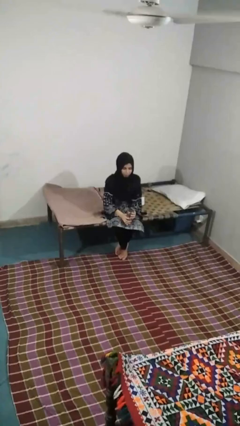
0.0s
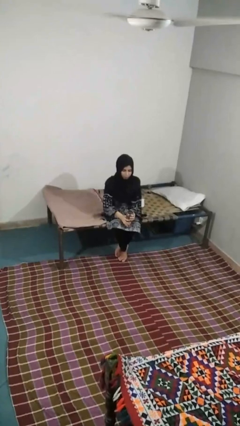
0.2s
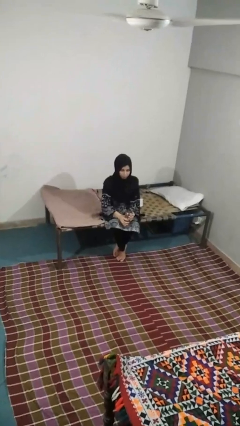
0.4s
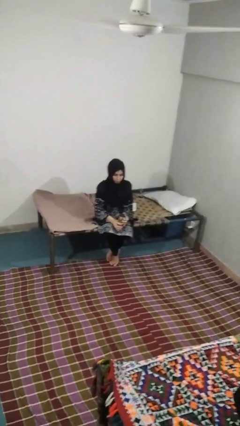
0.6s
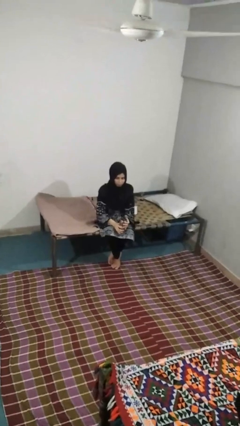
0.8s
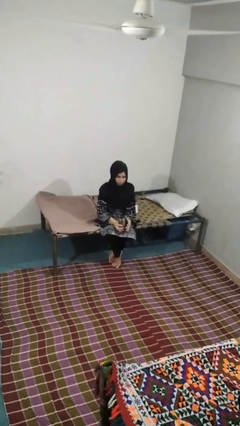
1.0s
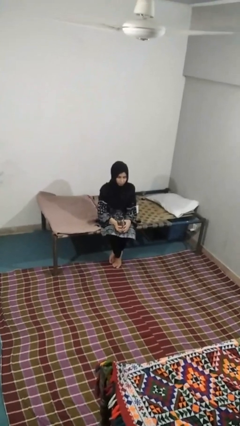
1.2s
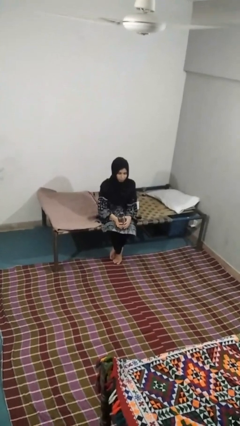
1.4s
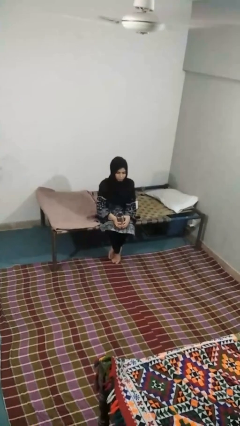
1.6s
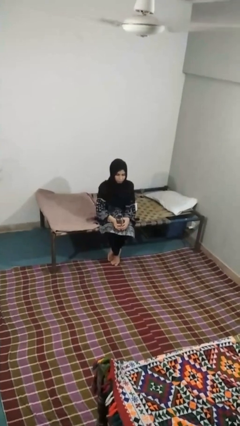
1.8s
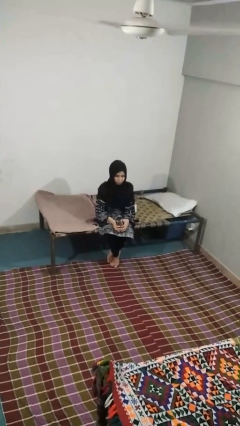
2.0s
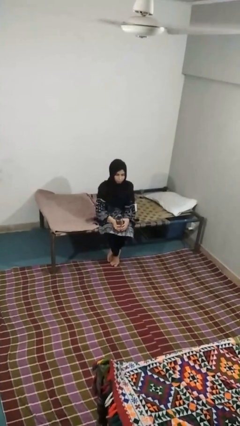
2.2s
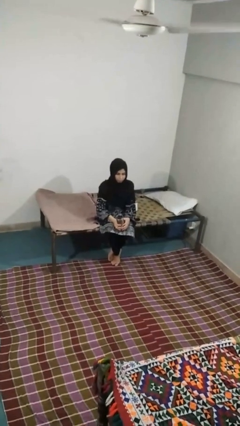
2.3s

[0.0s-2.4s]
person opens beverage can

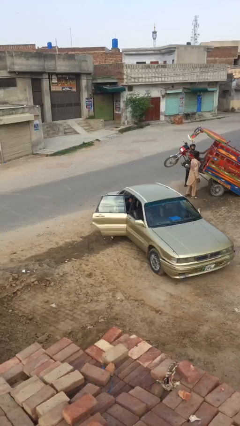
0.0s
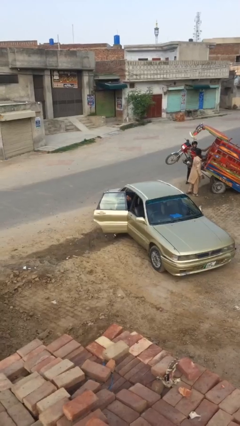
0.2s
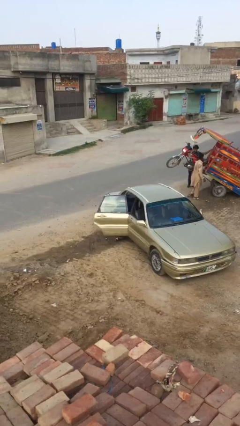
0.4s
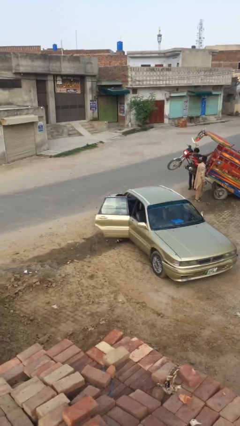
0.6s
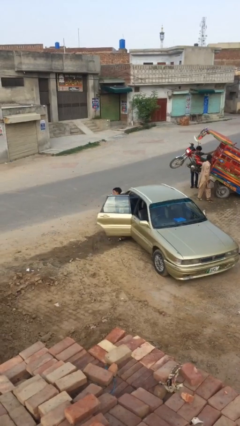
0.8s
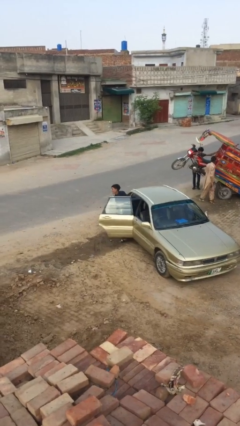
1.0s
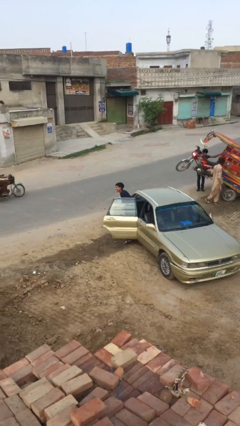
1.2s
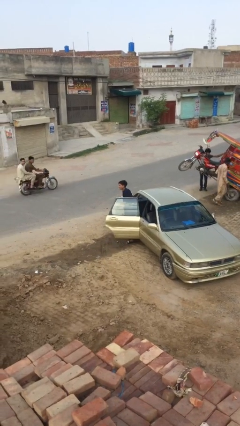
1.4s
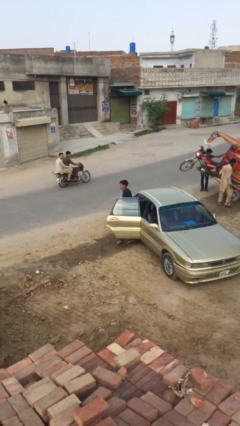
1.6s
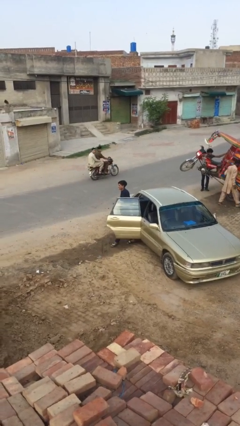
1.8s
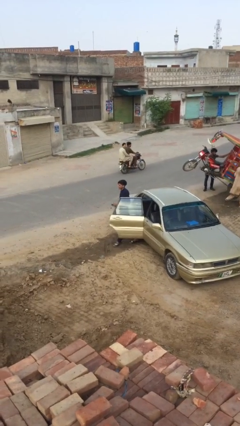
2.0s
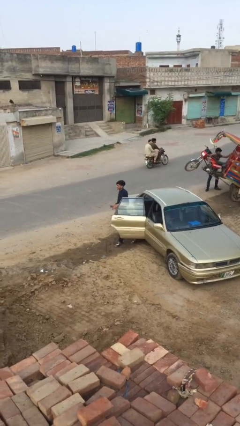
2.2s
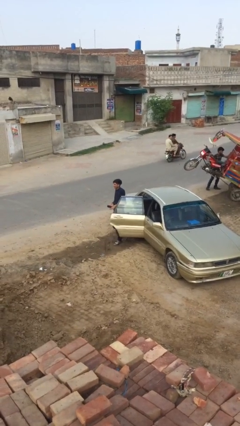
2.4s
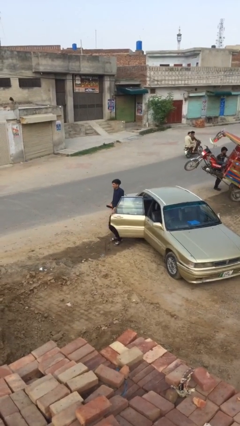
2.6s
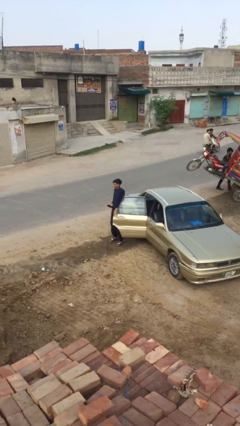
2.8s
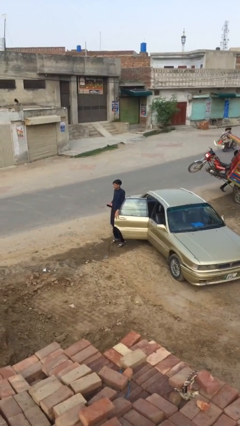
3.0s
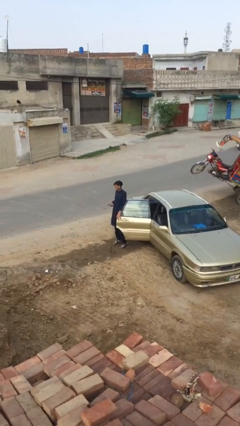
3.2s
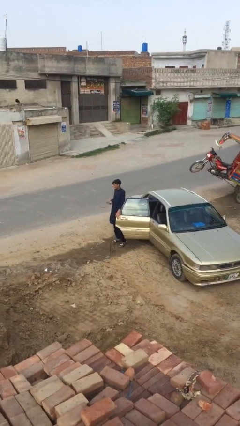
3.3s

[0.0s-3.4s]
person exits car

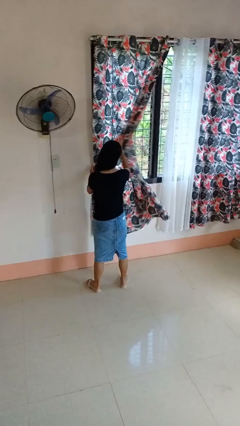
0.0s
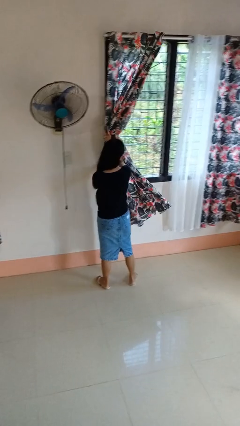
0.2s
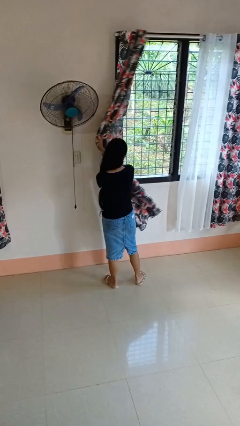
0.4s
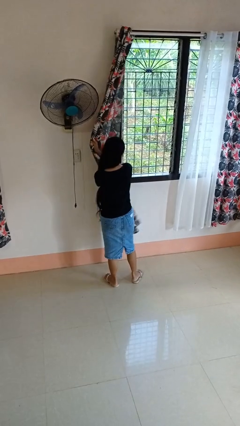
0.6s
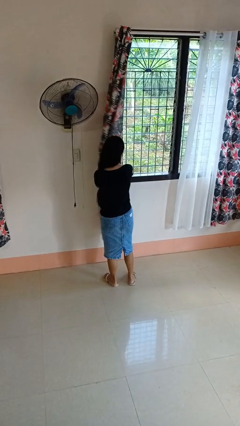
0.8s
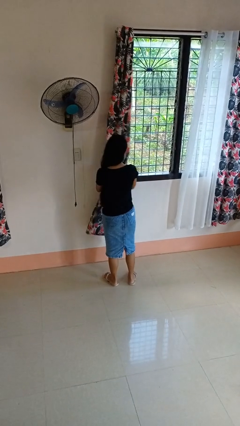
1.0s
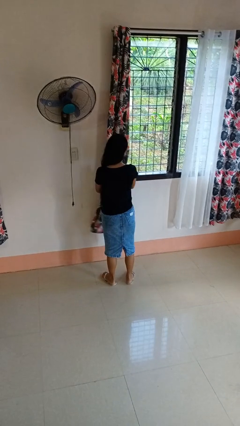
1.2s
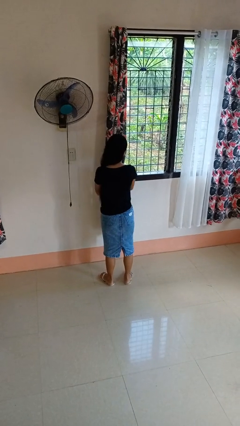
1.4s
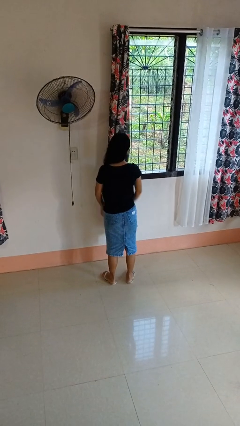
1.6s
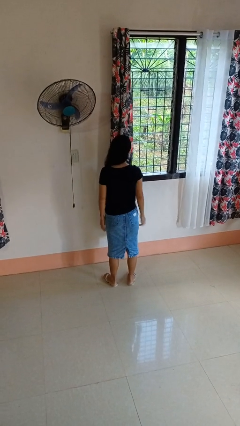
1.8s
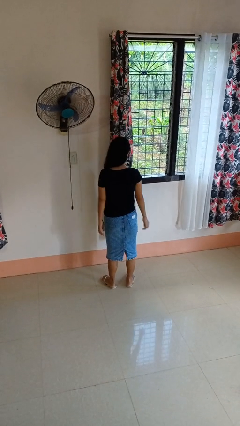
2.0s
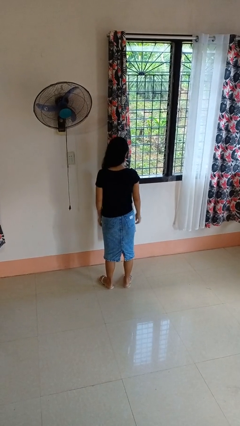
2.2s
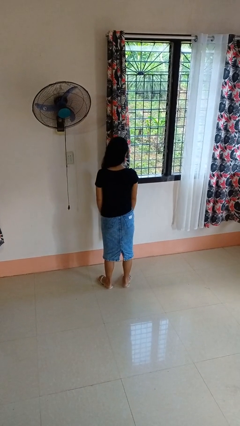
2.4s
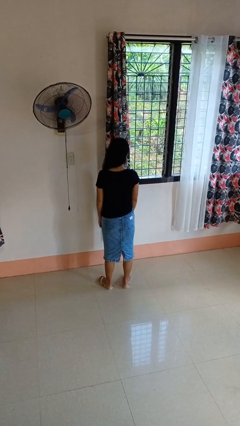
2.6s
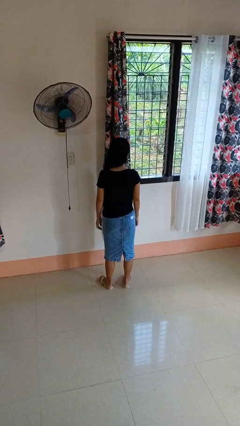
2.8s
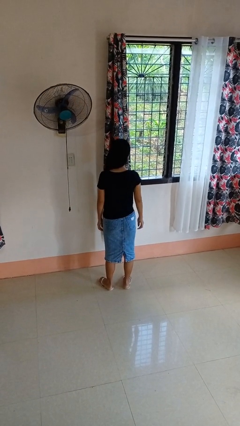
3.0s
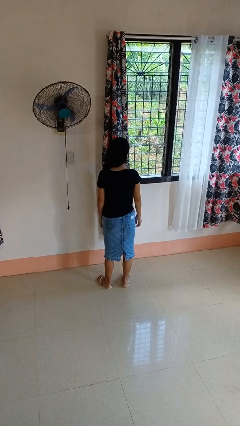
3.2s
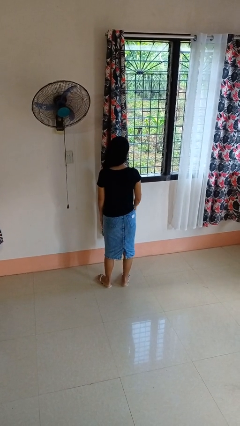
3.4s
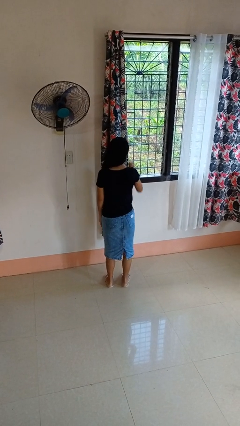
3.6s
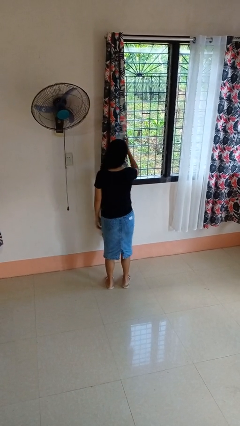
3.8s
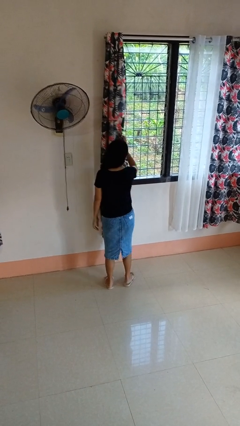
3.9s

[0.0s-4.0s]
person opens curtains

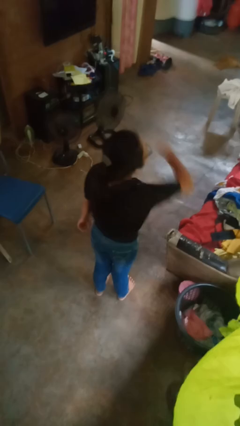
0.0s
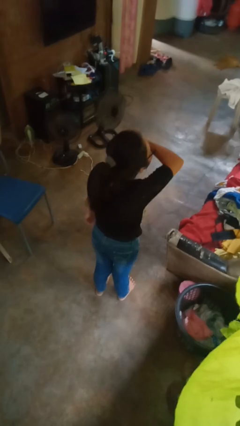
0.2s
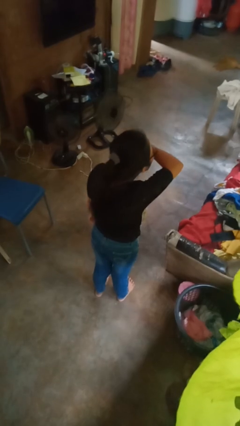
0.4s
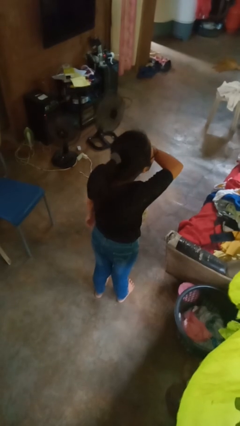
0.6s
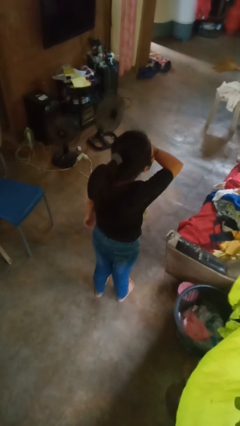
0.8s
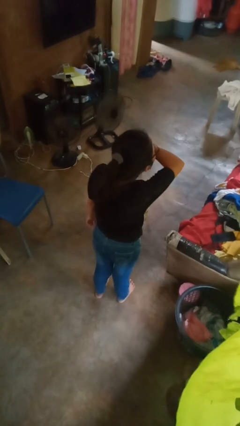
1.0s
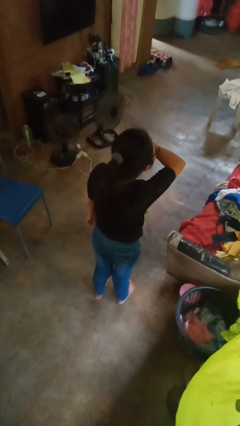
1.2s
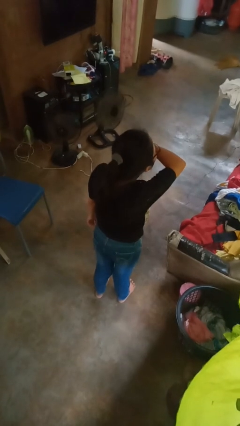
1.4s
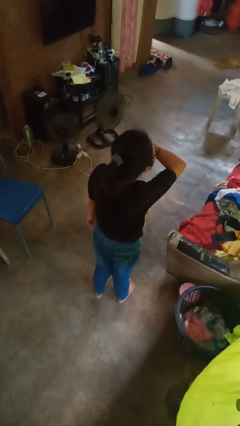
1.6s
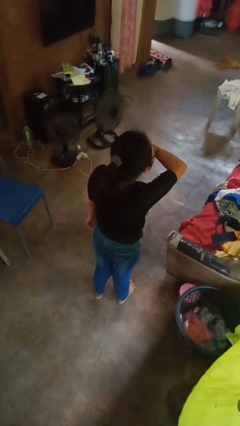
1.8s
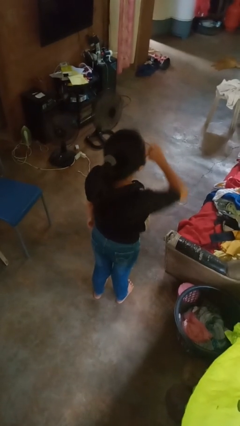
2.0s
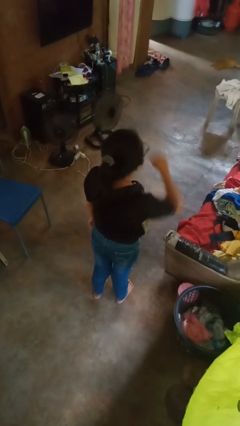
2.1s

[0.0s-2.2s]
person sneezes into arm

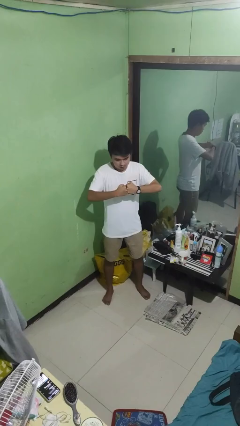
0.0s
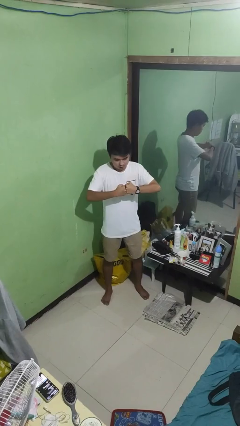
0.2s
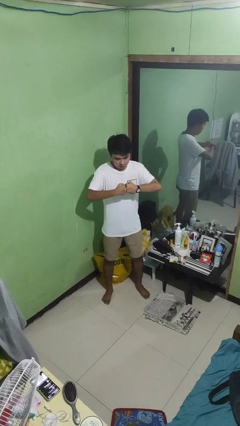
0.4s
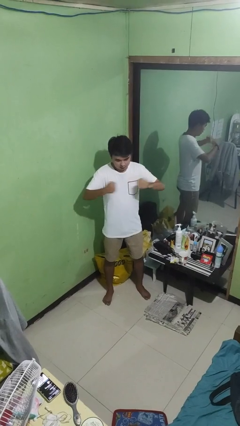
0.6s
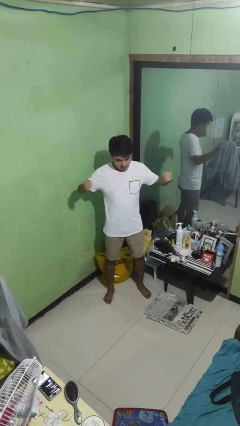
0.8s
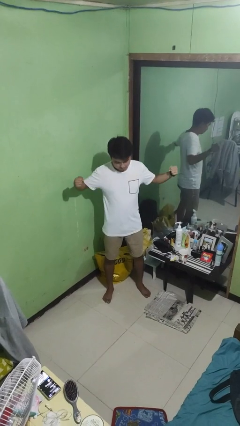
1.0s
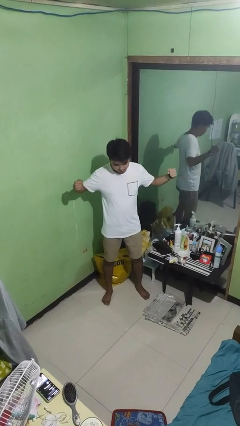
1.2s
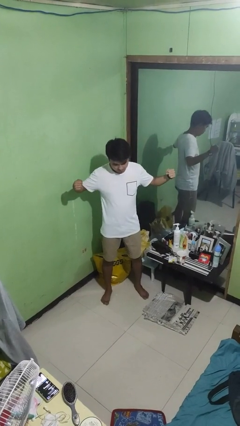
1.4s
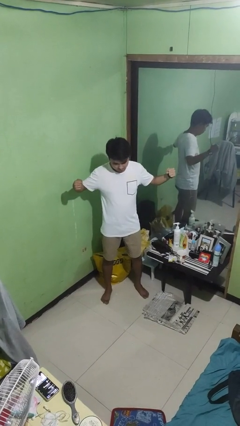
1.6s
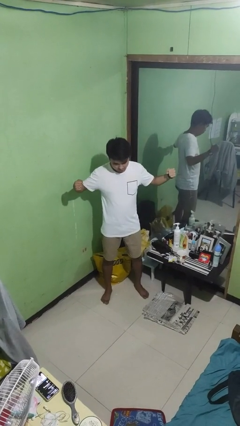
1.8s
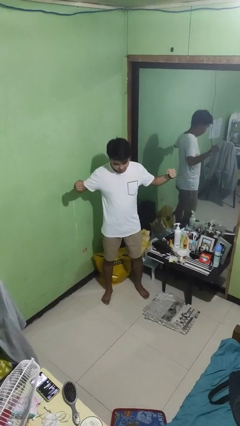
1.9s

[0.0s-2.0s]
person gestures zoom in

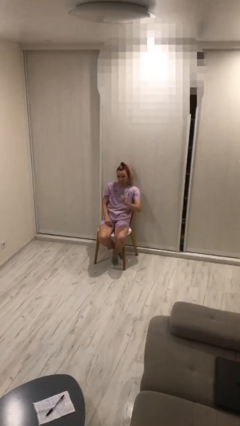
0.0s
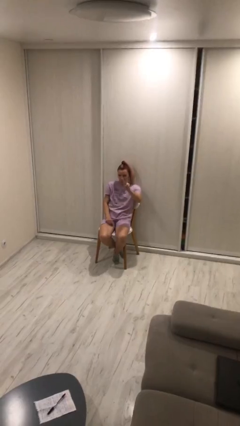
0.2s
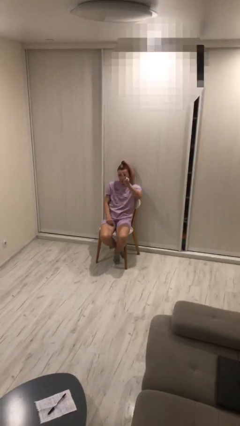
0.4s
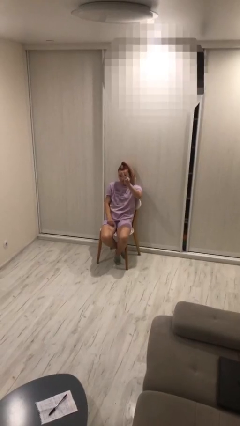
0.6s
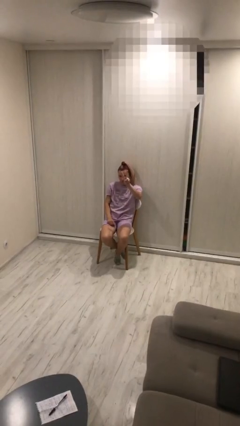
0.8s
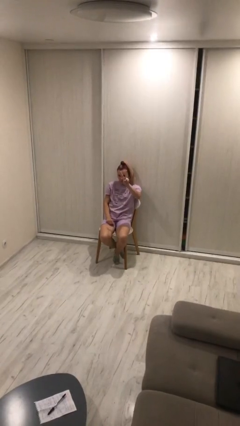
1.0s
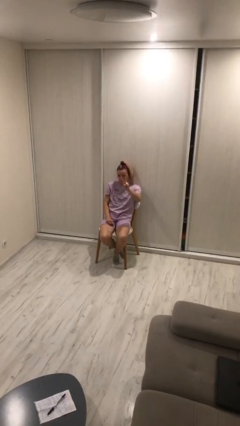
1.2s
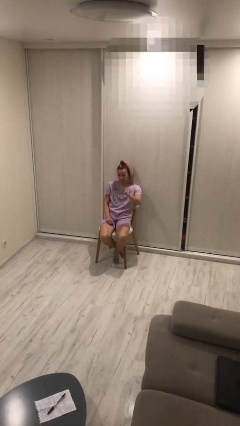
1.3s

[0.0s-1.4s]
person gestures peace

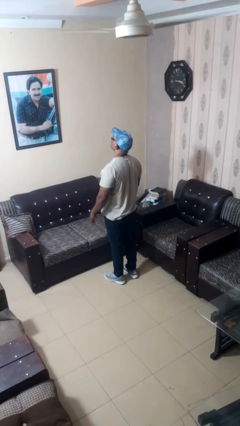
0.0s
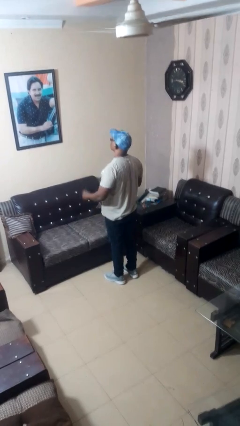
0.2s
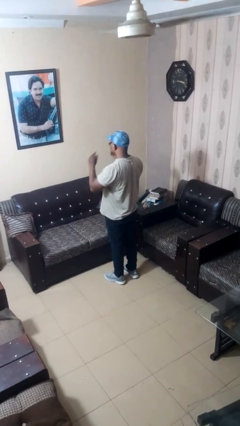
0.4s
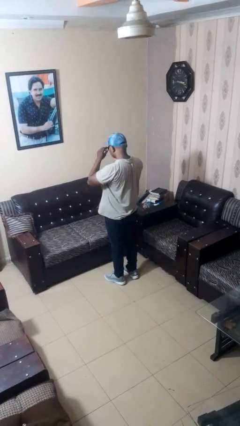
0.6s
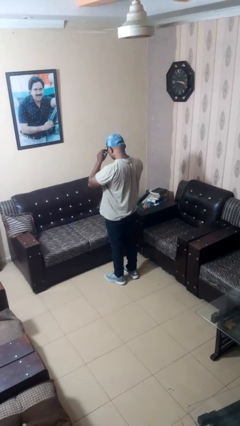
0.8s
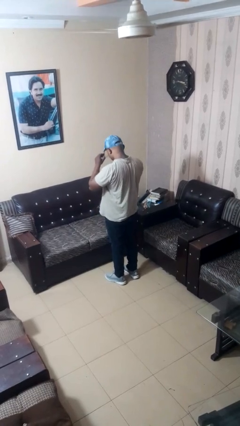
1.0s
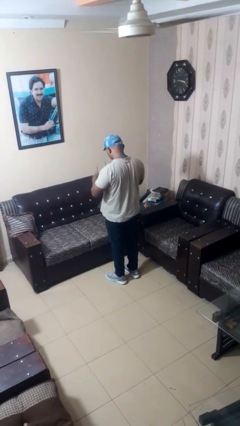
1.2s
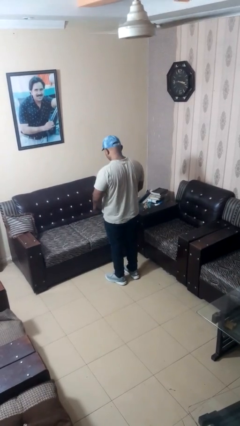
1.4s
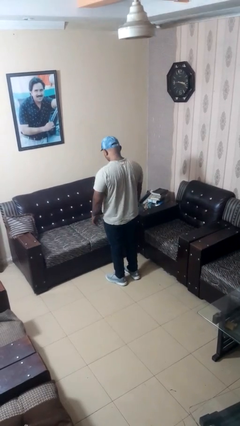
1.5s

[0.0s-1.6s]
person takes off glasses

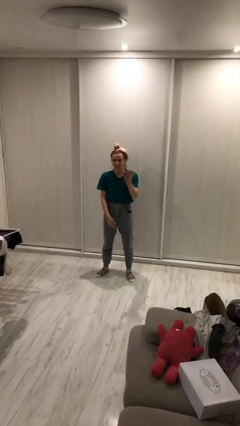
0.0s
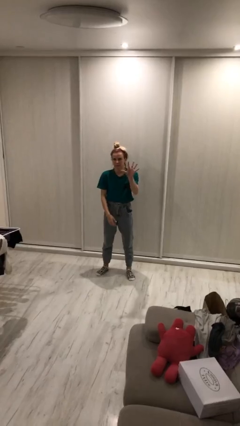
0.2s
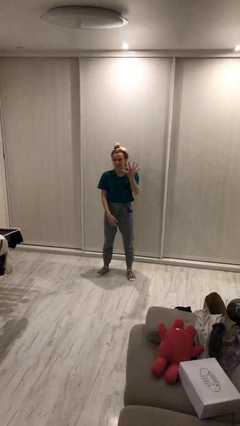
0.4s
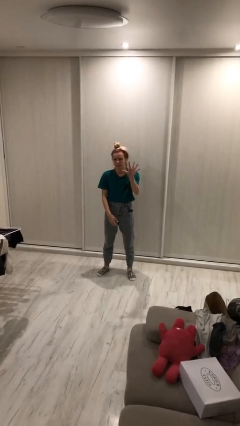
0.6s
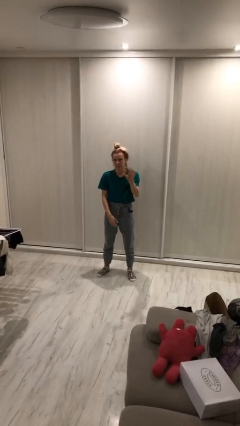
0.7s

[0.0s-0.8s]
person gestures number five
